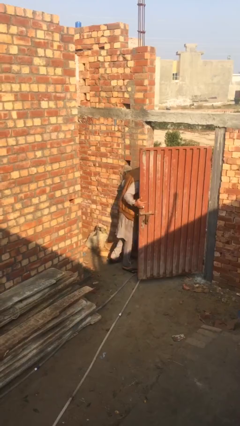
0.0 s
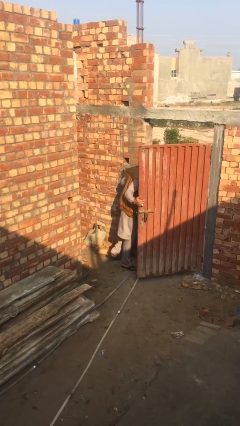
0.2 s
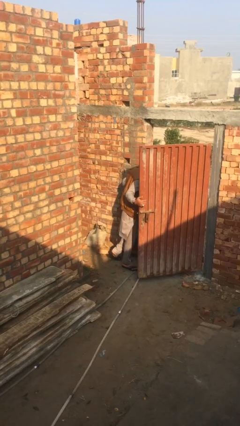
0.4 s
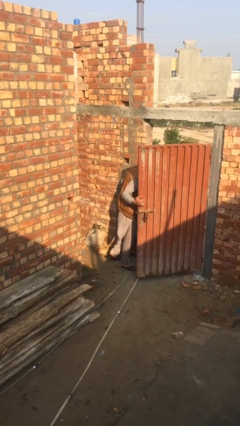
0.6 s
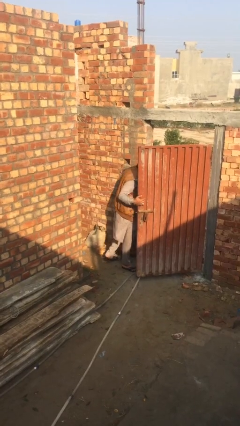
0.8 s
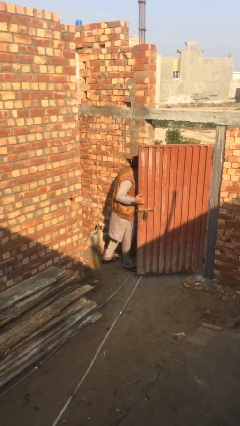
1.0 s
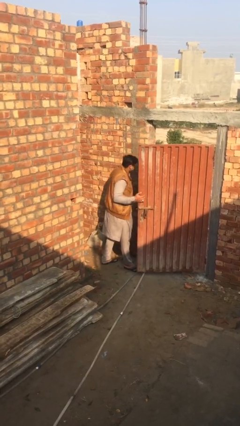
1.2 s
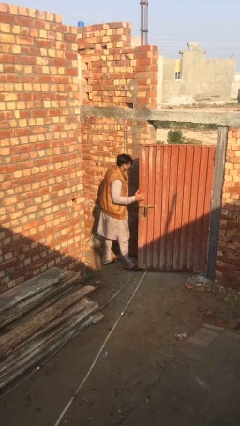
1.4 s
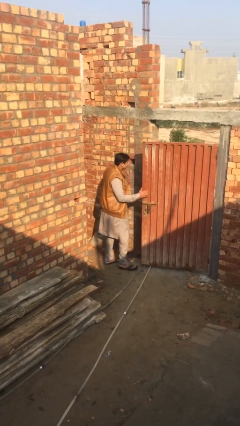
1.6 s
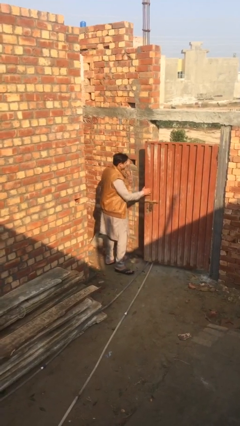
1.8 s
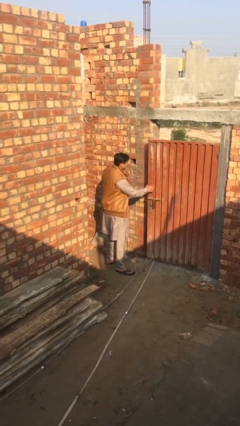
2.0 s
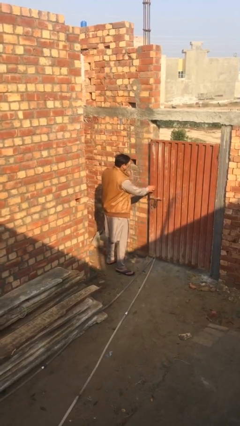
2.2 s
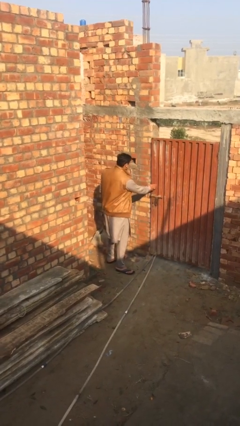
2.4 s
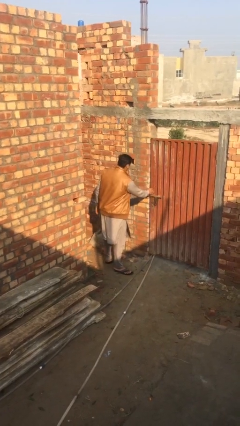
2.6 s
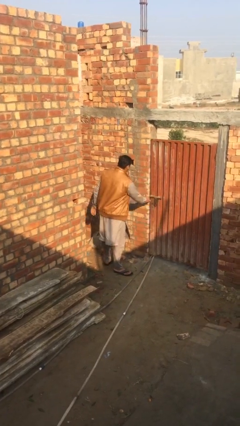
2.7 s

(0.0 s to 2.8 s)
person closes facility door

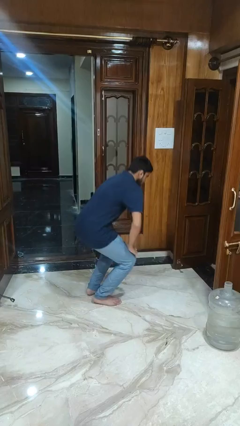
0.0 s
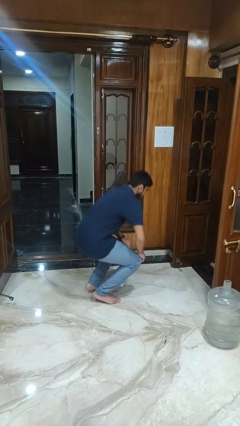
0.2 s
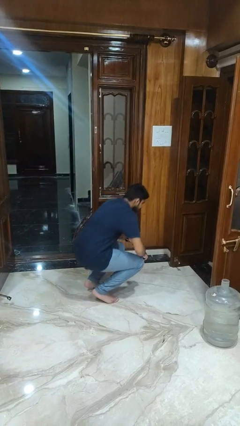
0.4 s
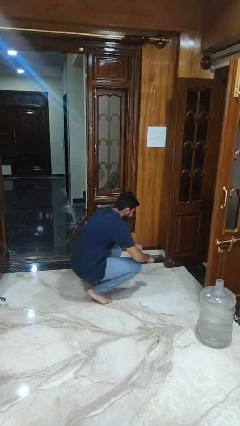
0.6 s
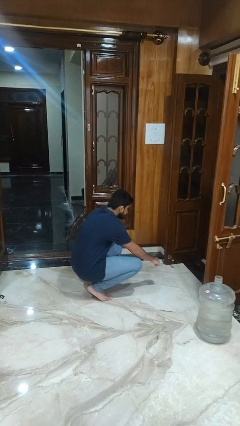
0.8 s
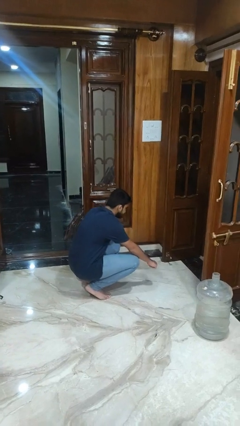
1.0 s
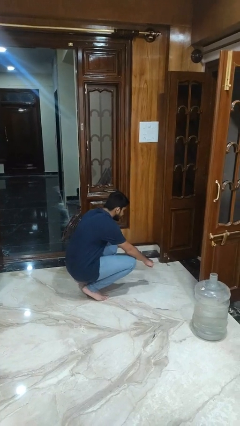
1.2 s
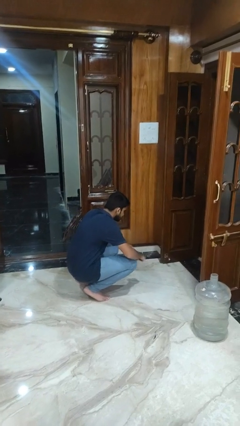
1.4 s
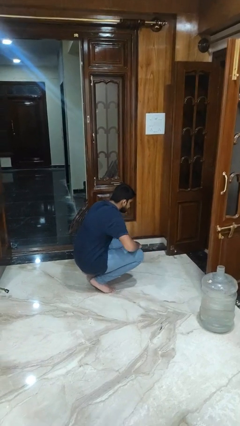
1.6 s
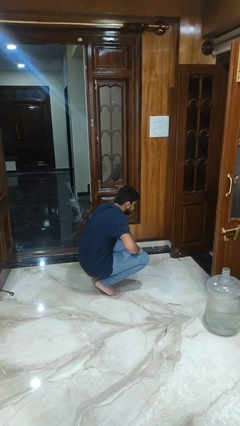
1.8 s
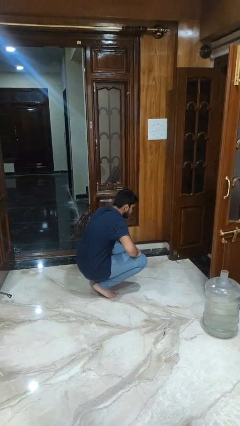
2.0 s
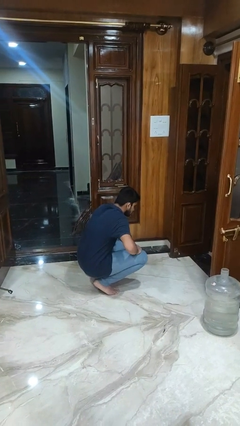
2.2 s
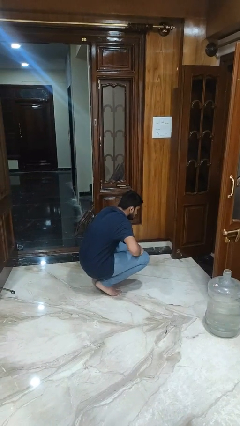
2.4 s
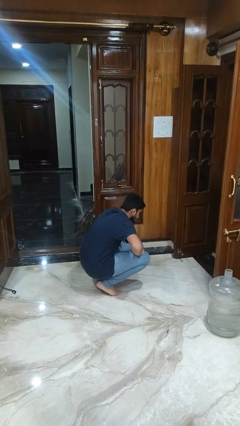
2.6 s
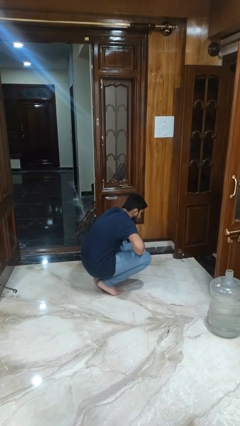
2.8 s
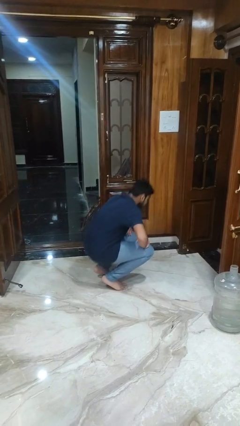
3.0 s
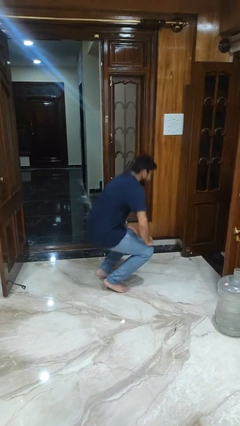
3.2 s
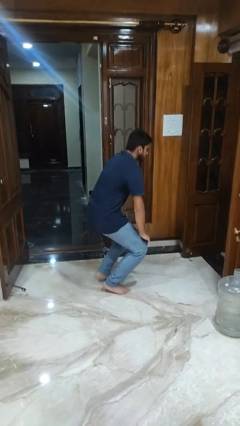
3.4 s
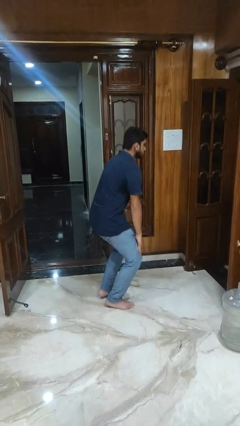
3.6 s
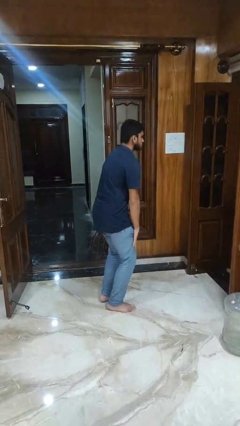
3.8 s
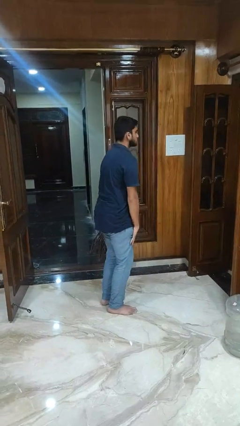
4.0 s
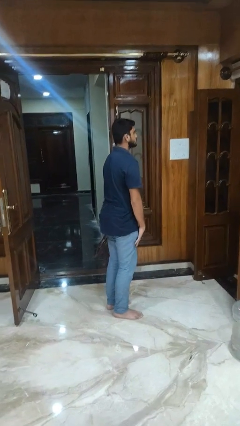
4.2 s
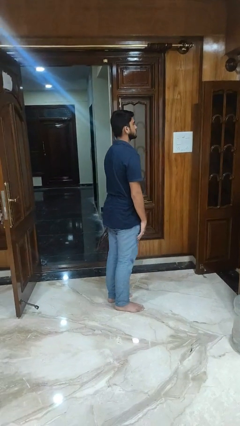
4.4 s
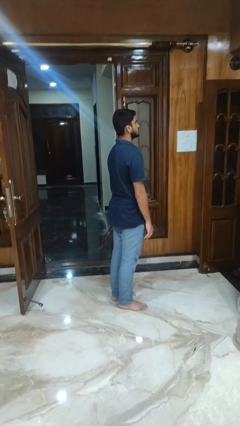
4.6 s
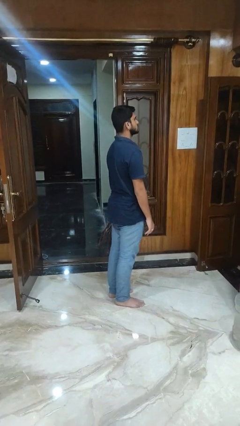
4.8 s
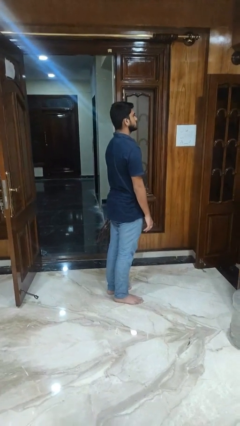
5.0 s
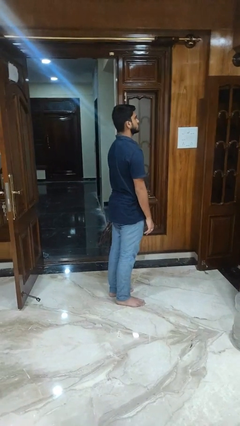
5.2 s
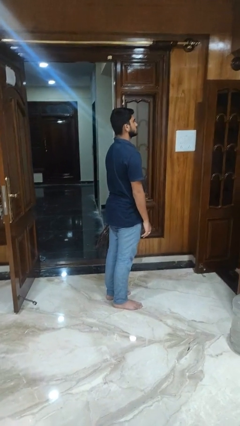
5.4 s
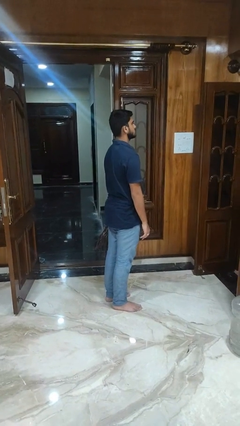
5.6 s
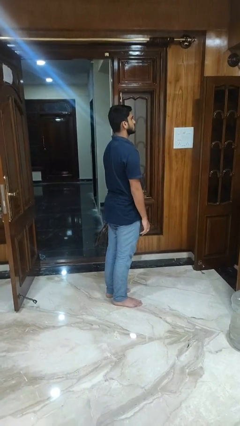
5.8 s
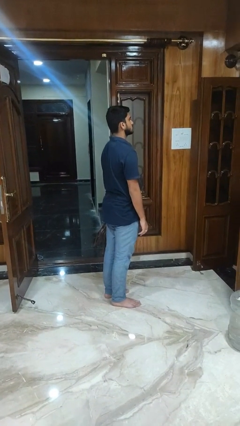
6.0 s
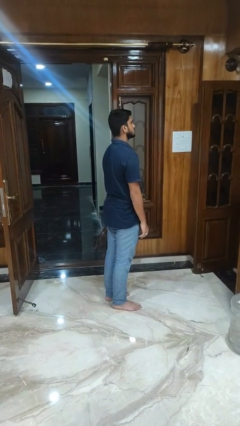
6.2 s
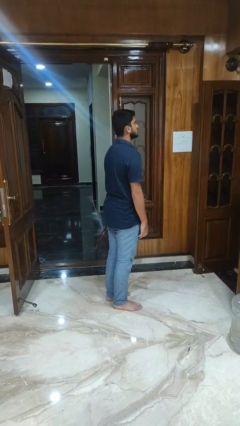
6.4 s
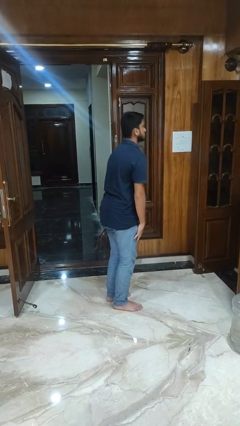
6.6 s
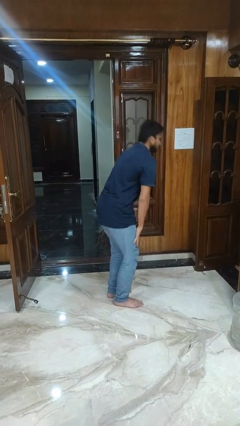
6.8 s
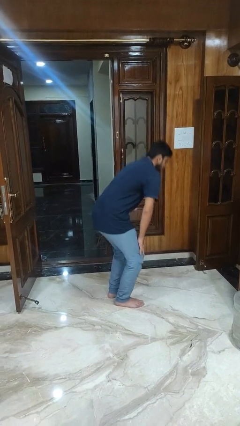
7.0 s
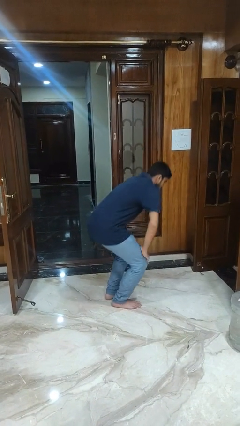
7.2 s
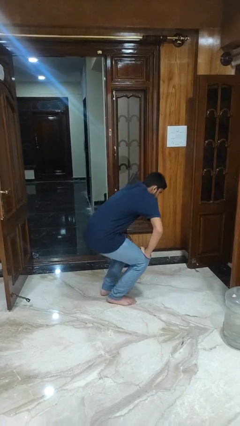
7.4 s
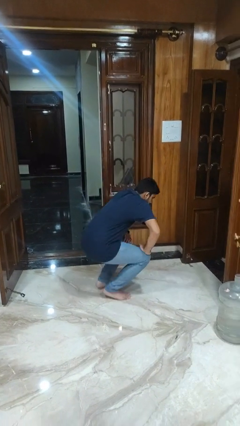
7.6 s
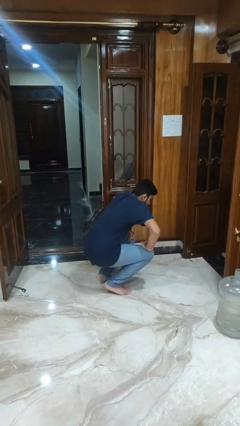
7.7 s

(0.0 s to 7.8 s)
person squats

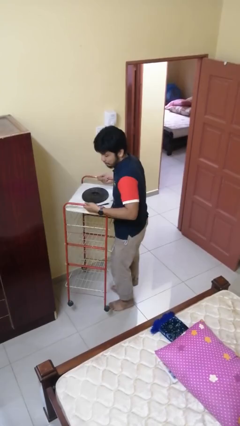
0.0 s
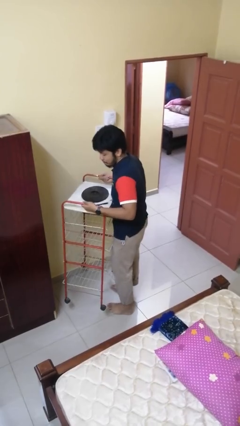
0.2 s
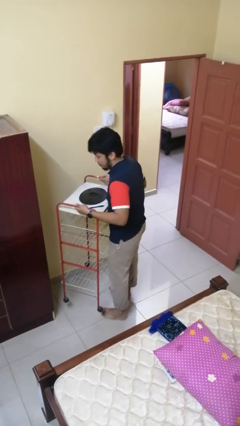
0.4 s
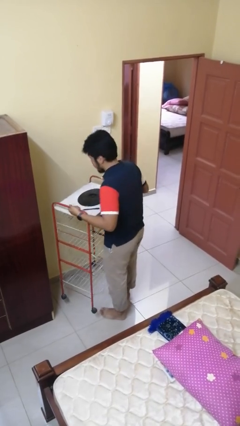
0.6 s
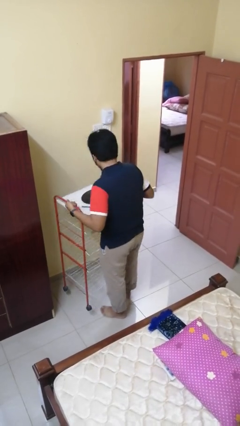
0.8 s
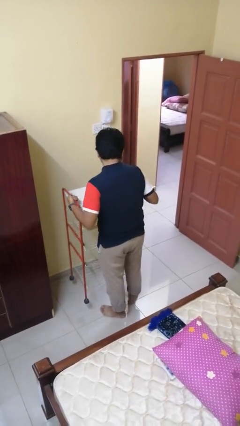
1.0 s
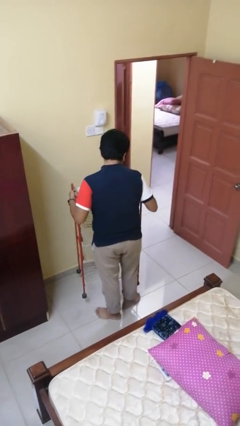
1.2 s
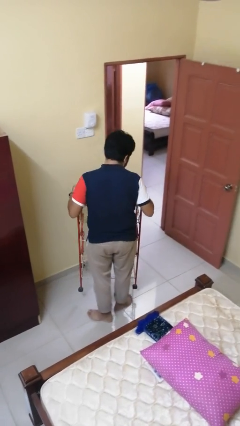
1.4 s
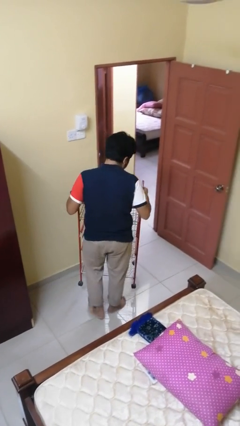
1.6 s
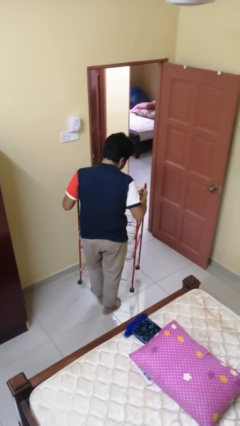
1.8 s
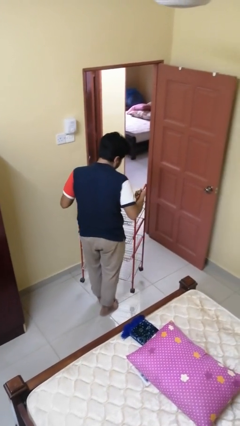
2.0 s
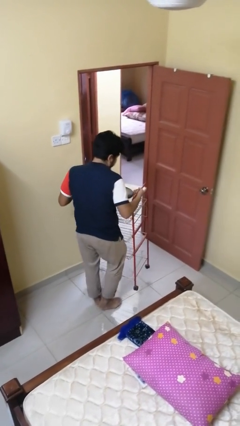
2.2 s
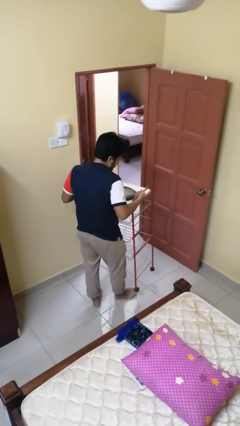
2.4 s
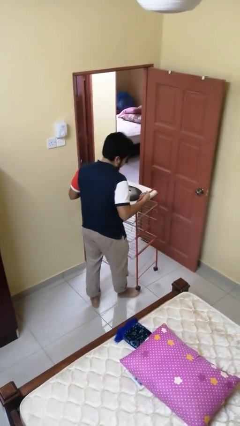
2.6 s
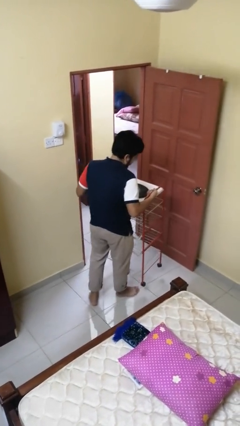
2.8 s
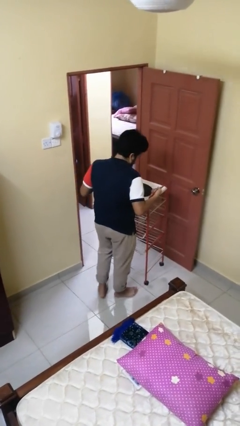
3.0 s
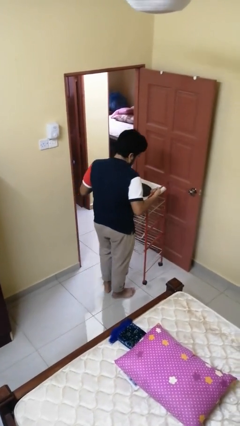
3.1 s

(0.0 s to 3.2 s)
person carries furniture

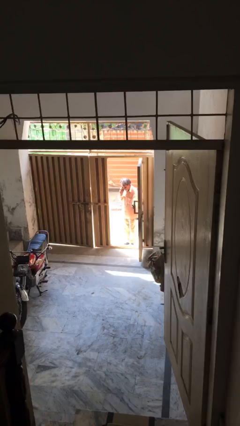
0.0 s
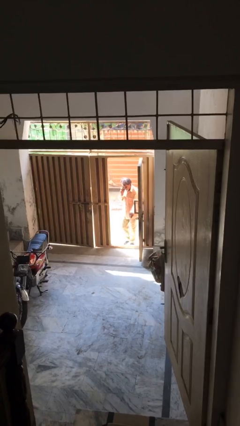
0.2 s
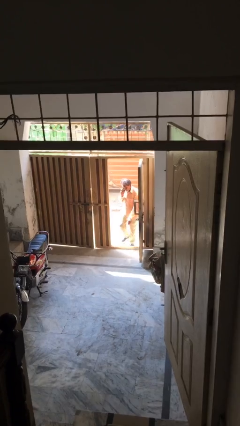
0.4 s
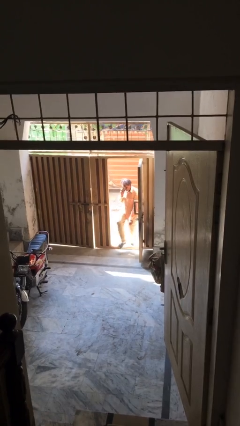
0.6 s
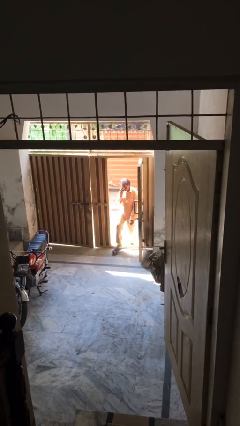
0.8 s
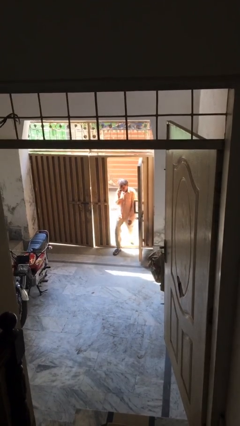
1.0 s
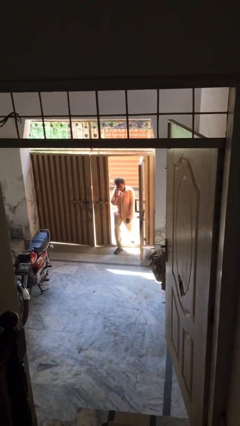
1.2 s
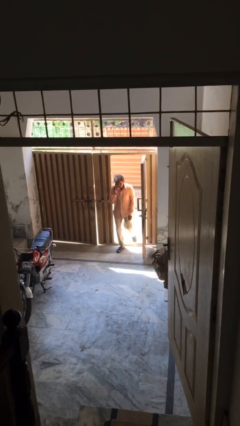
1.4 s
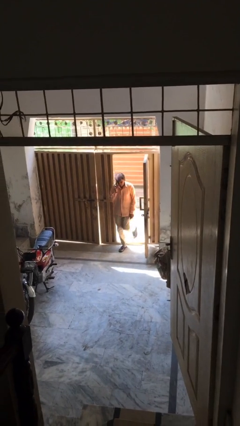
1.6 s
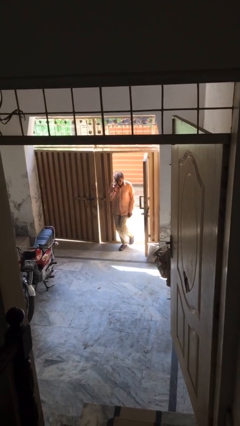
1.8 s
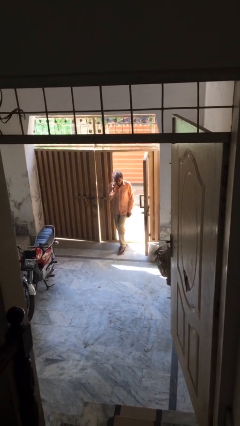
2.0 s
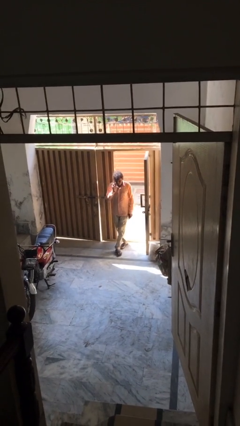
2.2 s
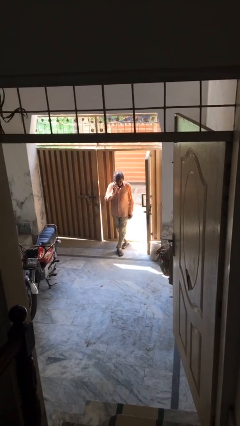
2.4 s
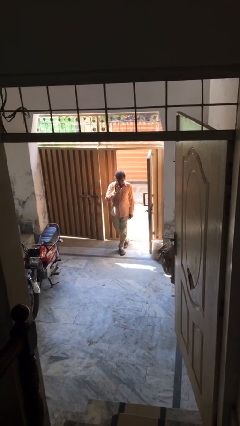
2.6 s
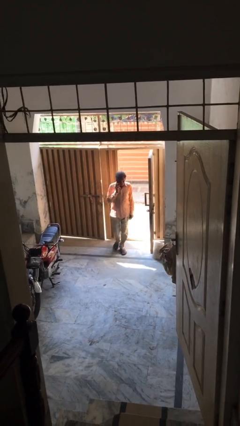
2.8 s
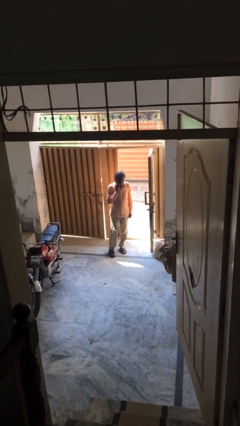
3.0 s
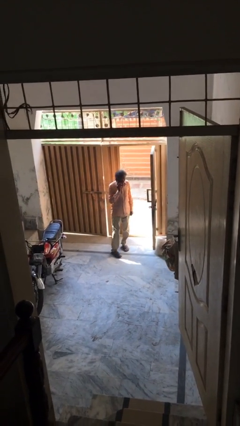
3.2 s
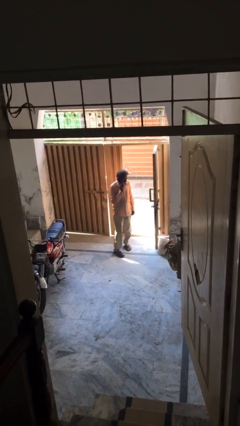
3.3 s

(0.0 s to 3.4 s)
person enters scene through structure

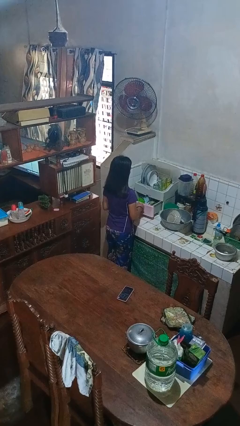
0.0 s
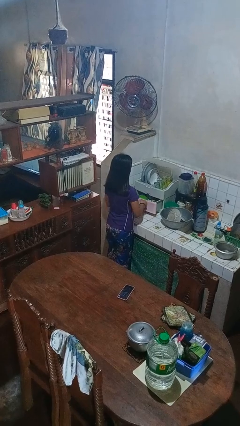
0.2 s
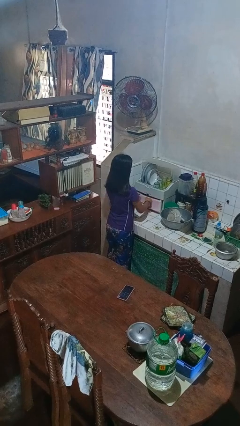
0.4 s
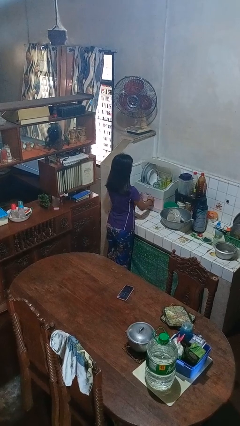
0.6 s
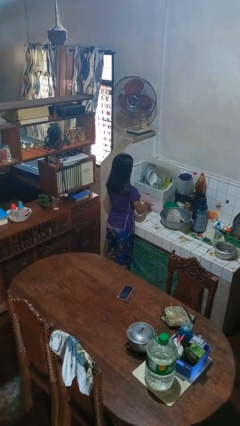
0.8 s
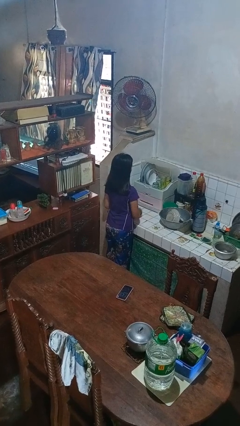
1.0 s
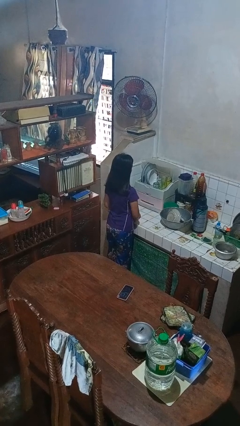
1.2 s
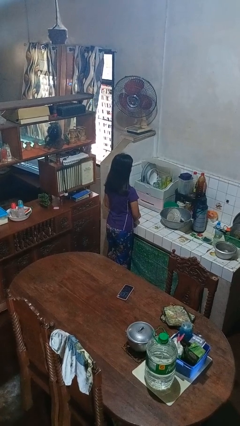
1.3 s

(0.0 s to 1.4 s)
person closes kitchen drawer
